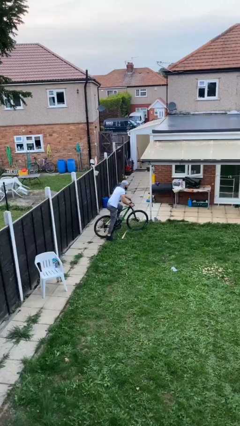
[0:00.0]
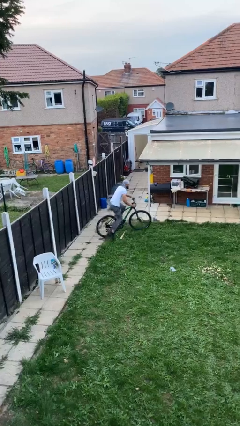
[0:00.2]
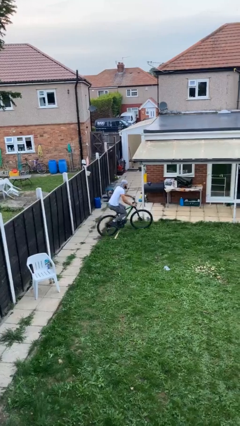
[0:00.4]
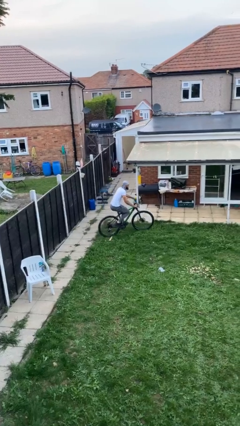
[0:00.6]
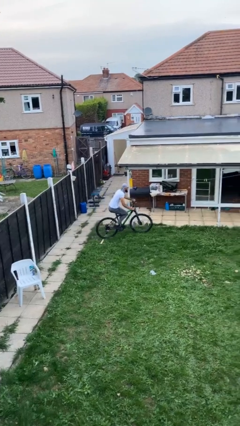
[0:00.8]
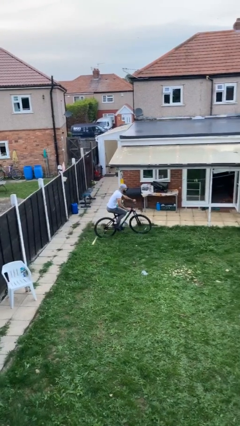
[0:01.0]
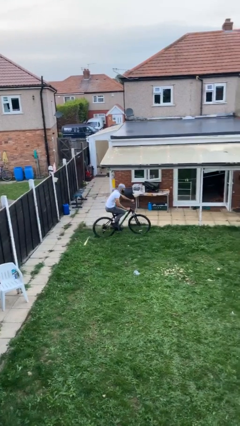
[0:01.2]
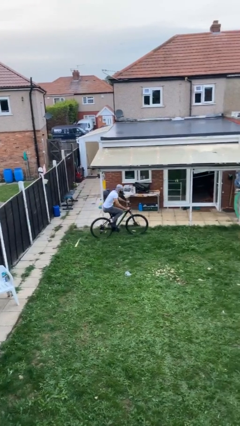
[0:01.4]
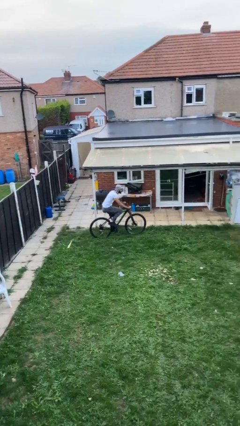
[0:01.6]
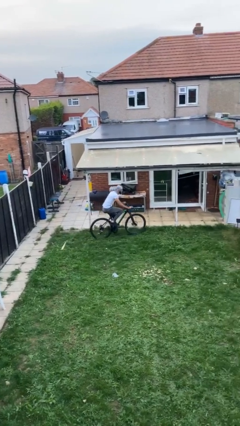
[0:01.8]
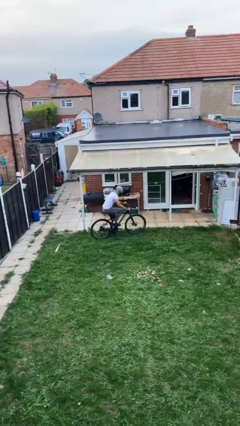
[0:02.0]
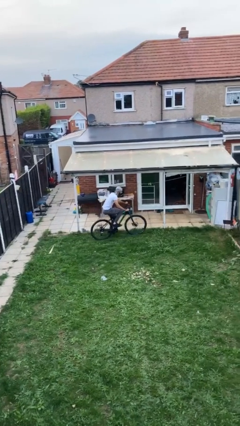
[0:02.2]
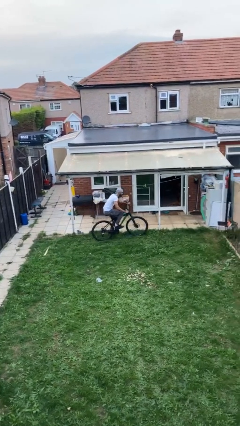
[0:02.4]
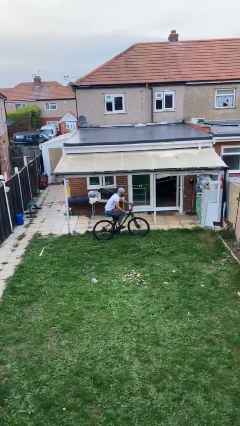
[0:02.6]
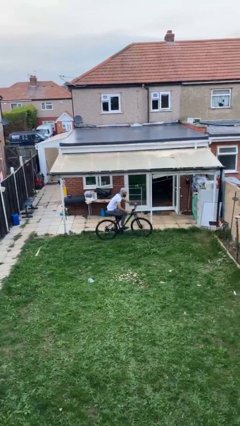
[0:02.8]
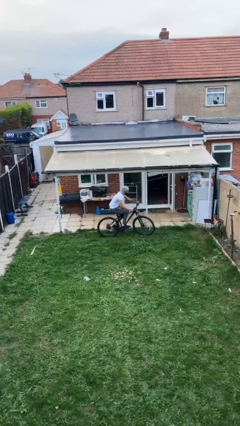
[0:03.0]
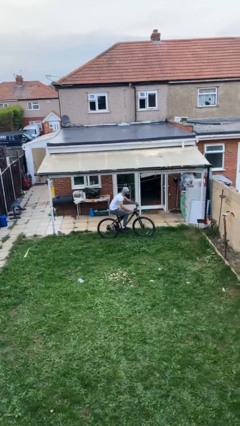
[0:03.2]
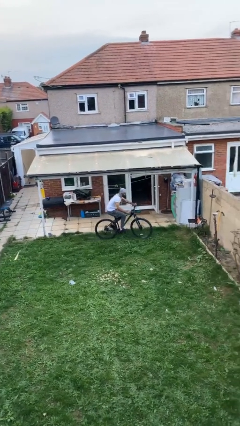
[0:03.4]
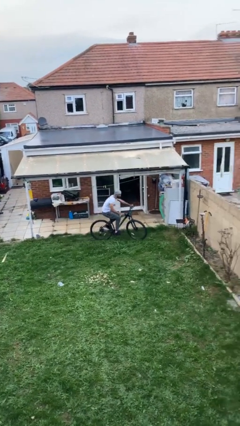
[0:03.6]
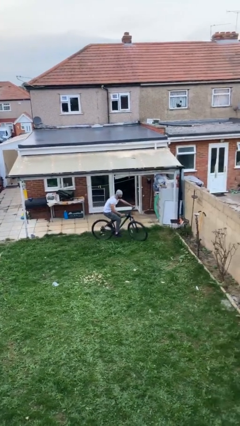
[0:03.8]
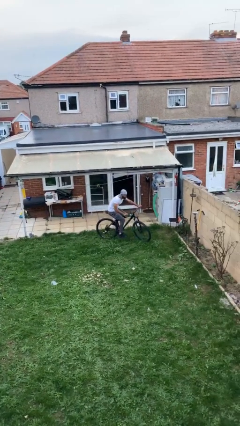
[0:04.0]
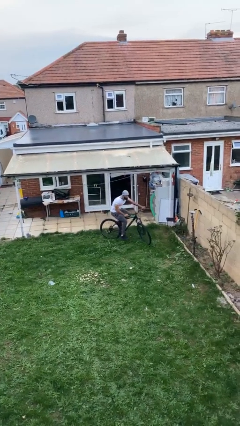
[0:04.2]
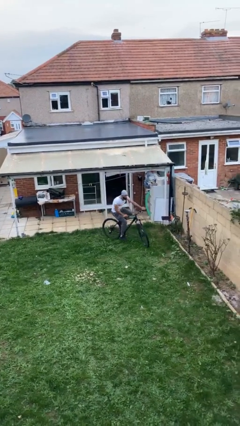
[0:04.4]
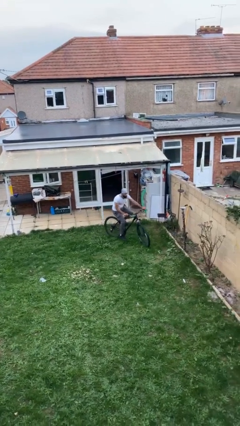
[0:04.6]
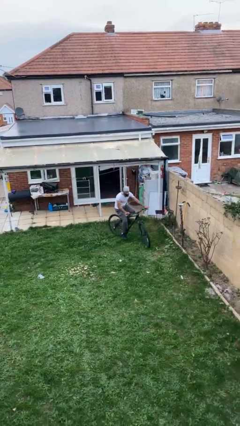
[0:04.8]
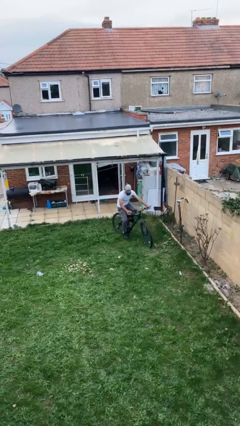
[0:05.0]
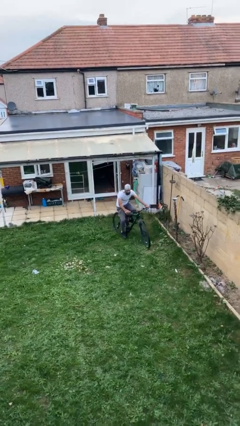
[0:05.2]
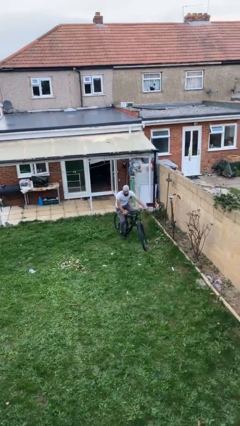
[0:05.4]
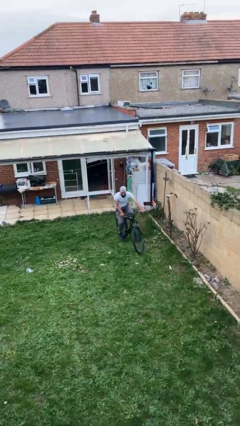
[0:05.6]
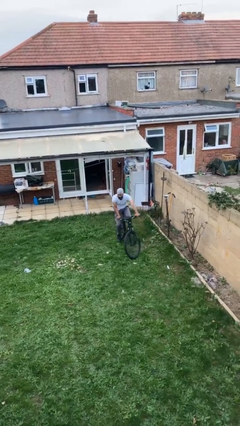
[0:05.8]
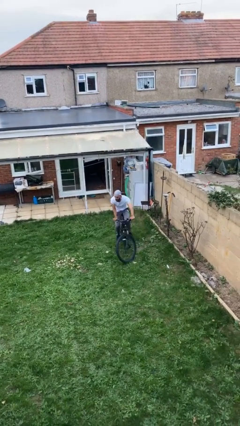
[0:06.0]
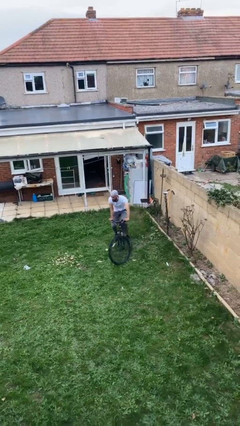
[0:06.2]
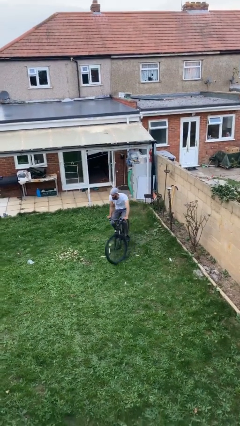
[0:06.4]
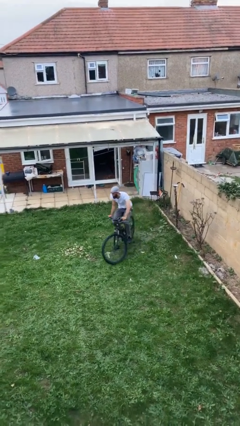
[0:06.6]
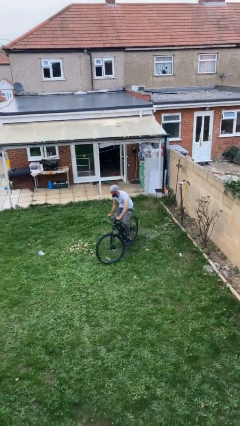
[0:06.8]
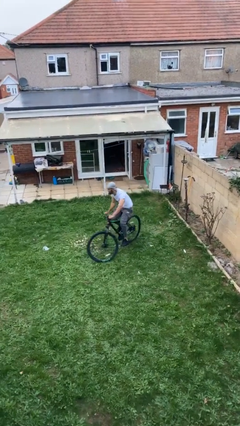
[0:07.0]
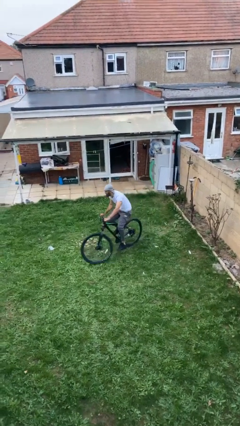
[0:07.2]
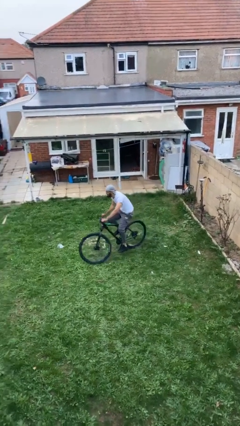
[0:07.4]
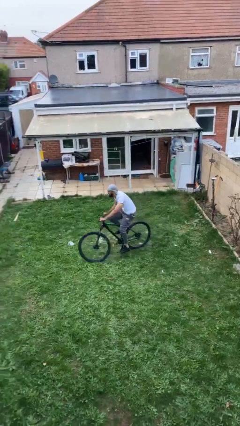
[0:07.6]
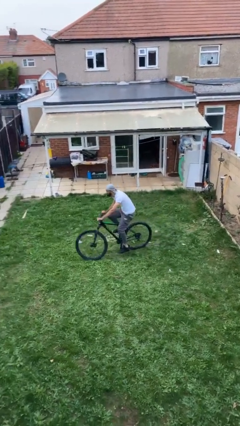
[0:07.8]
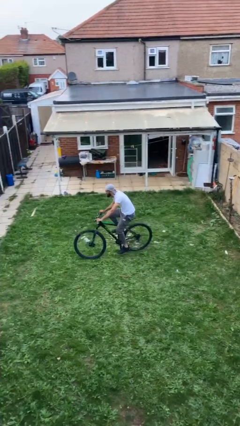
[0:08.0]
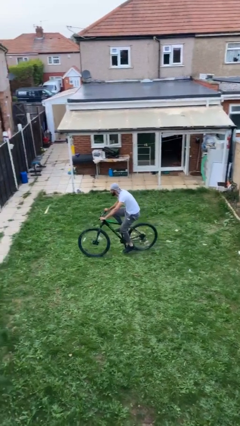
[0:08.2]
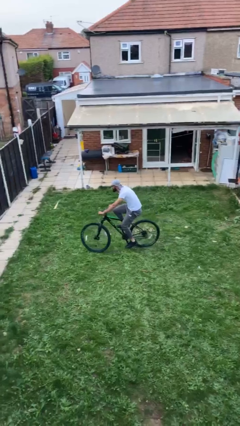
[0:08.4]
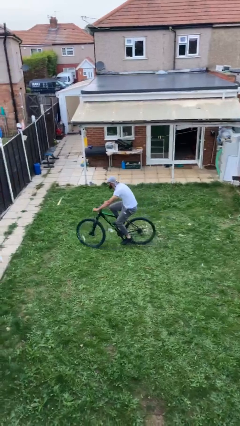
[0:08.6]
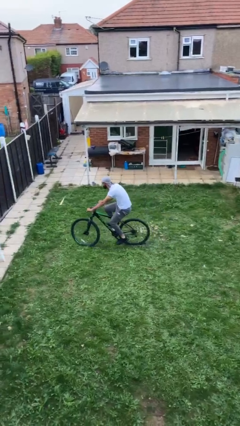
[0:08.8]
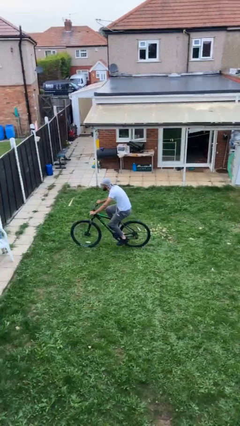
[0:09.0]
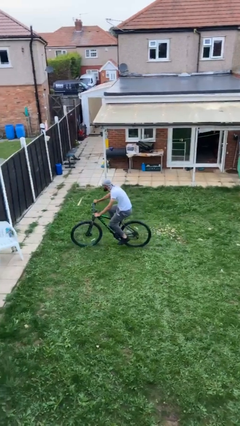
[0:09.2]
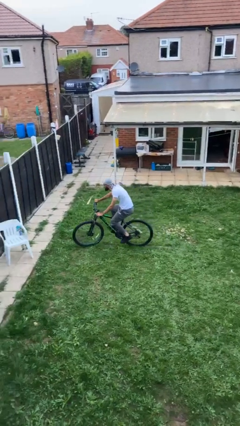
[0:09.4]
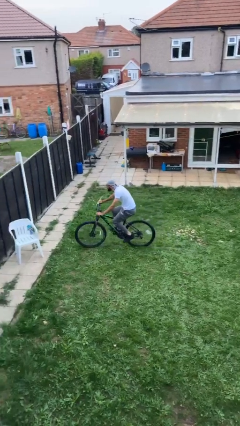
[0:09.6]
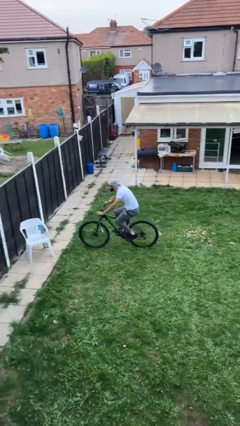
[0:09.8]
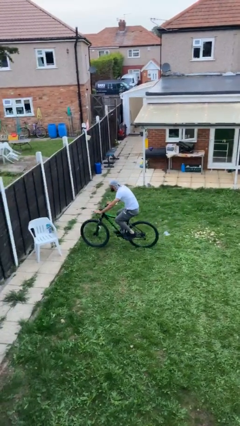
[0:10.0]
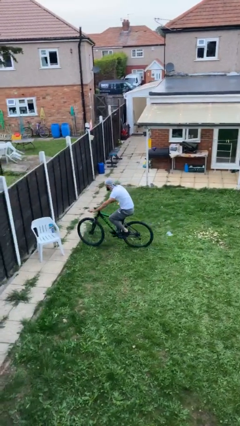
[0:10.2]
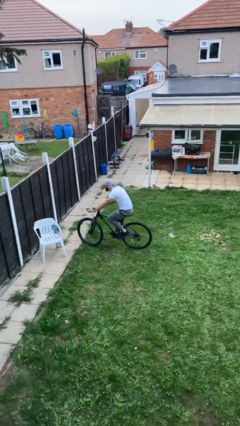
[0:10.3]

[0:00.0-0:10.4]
person rides bicycle

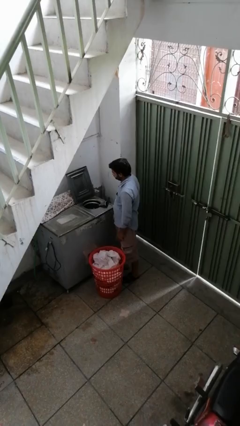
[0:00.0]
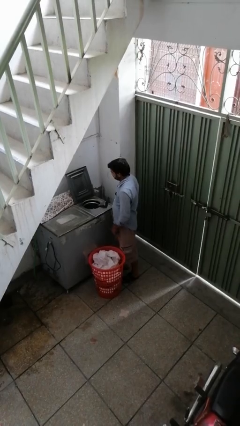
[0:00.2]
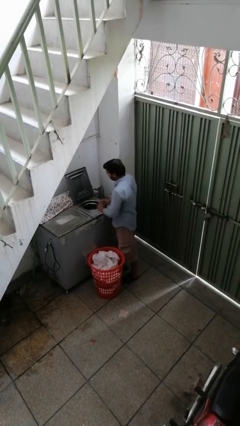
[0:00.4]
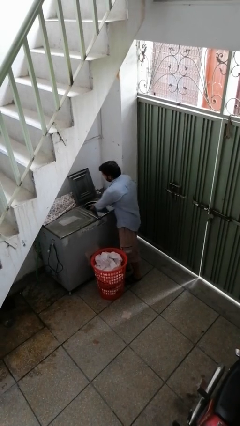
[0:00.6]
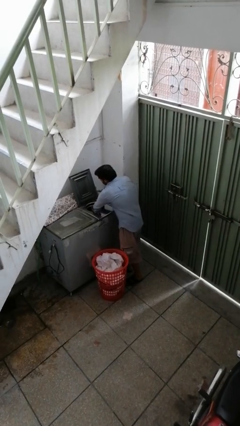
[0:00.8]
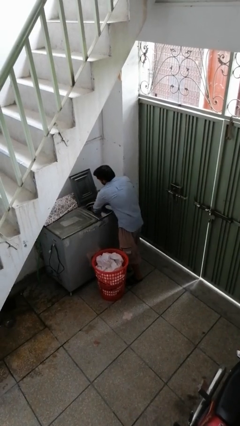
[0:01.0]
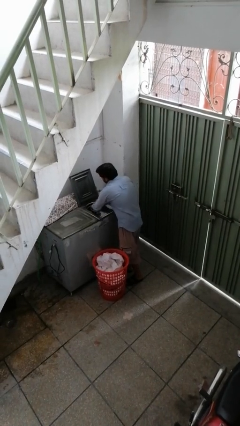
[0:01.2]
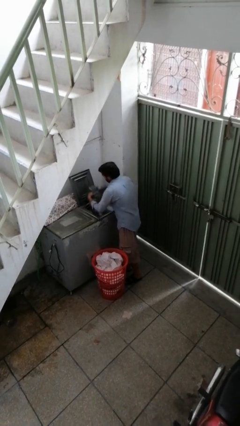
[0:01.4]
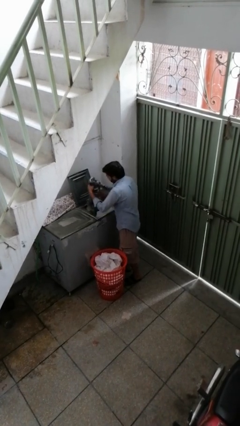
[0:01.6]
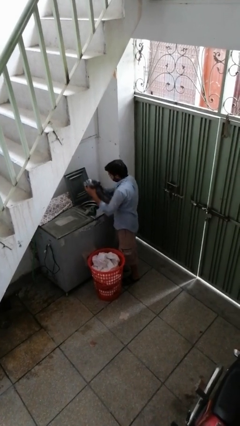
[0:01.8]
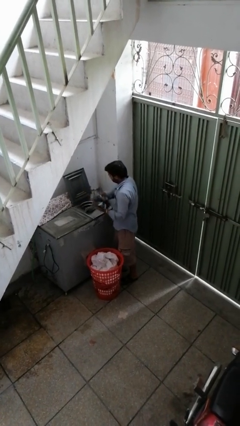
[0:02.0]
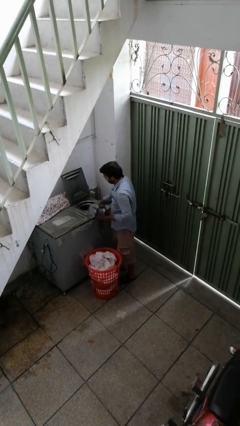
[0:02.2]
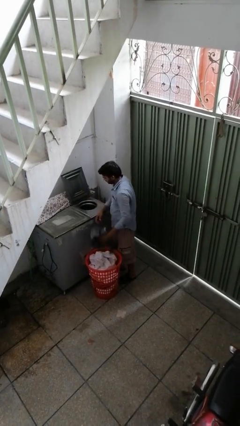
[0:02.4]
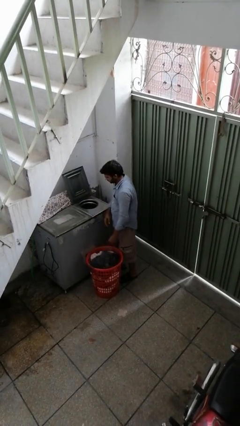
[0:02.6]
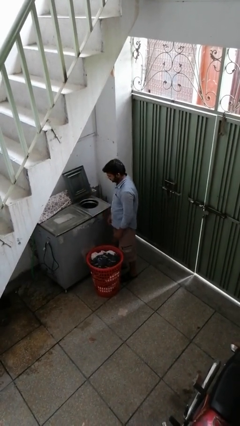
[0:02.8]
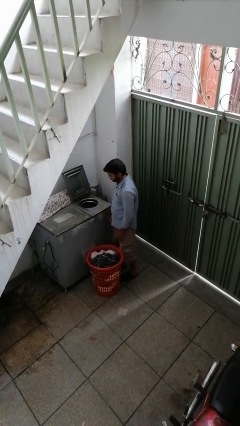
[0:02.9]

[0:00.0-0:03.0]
person unloads dryer

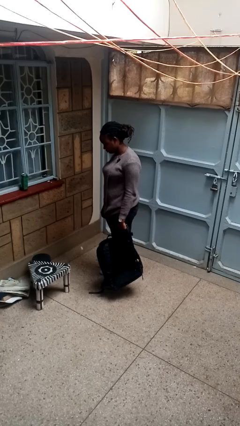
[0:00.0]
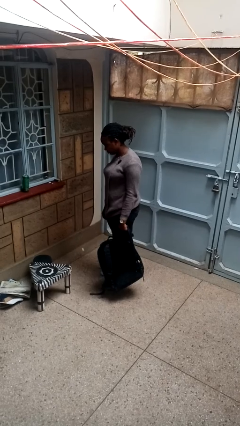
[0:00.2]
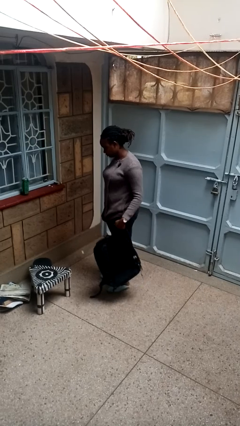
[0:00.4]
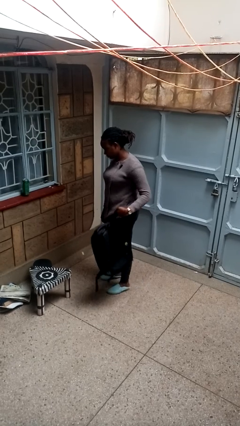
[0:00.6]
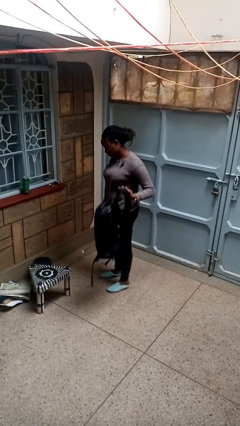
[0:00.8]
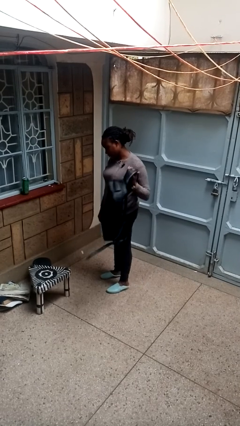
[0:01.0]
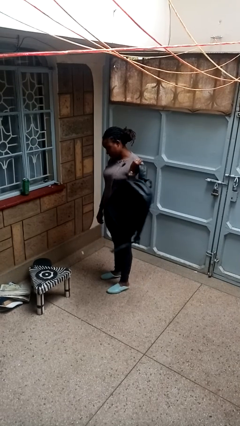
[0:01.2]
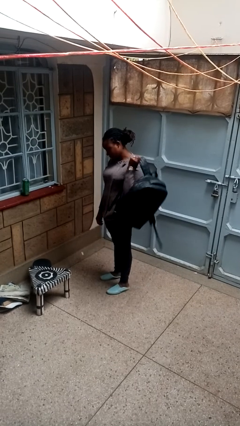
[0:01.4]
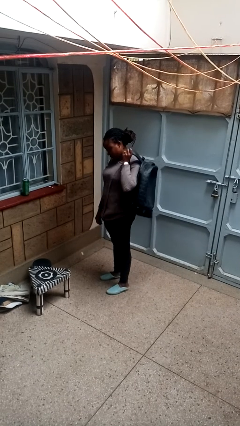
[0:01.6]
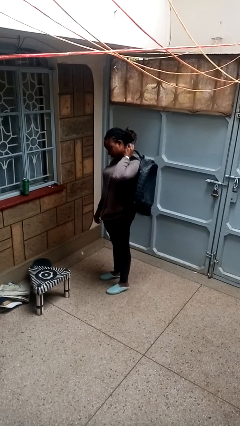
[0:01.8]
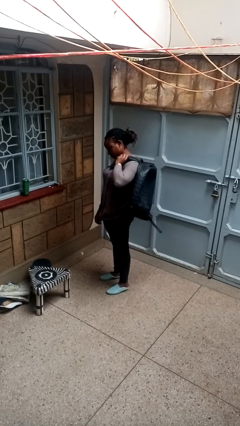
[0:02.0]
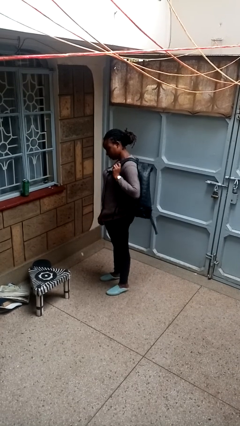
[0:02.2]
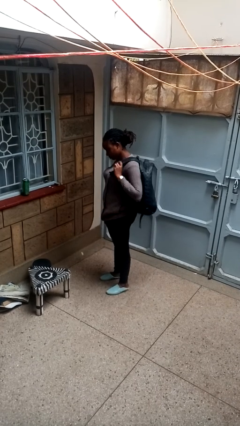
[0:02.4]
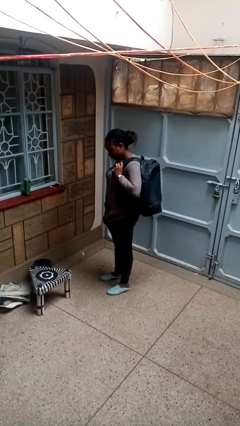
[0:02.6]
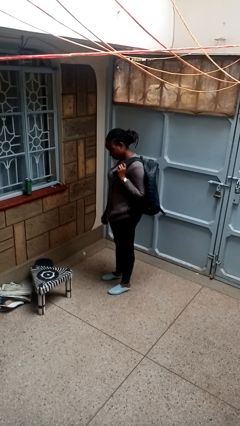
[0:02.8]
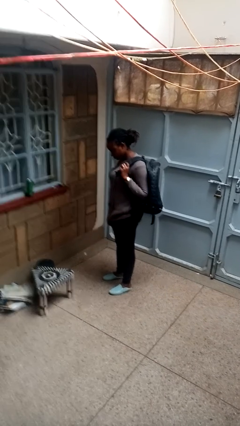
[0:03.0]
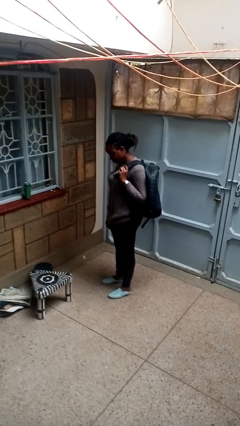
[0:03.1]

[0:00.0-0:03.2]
person puts on backpack

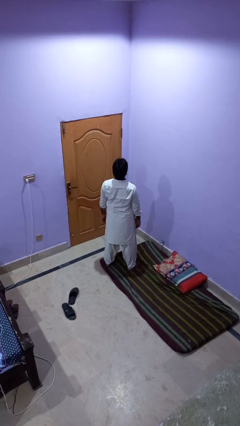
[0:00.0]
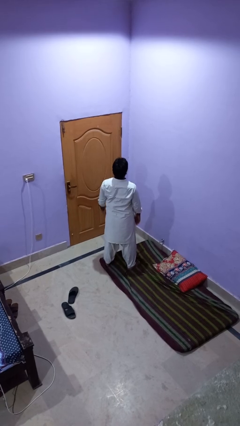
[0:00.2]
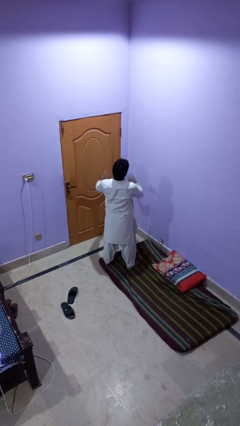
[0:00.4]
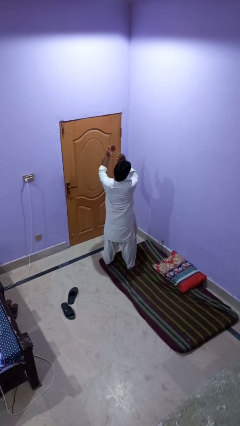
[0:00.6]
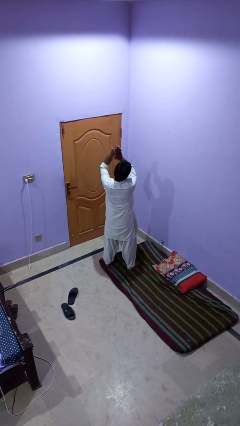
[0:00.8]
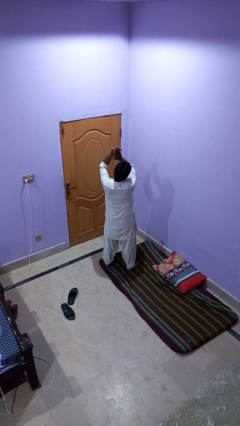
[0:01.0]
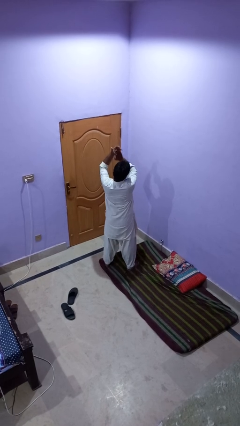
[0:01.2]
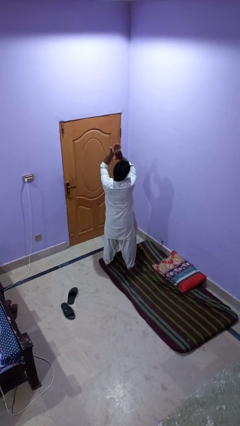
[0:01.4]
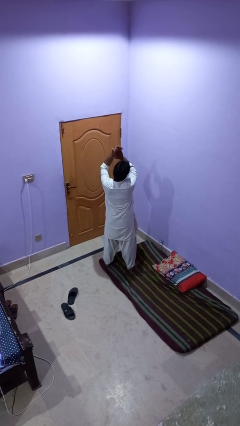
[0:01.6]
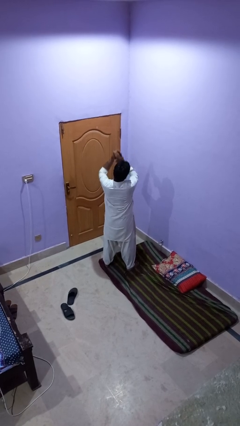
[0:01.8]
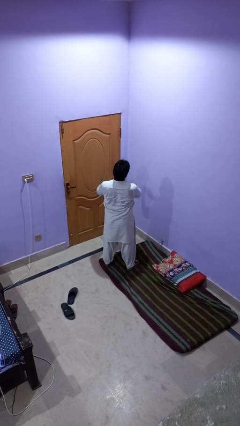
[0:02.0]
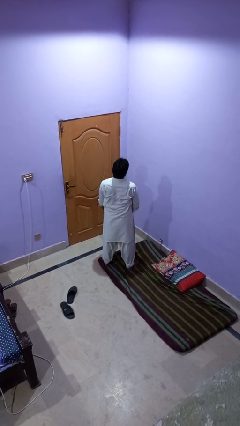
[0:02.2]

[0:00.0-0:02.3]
person claps hands
